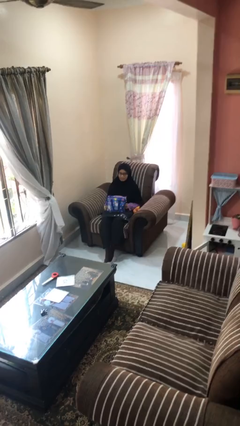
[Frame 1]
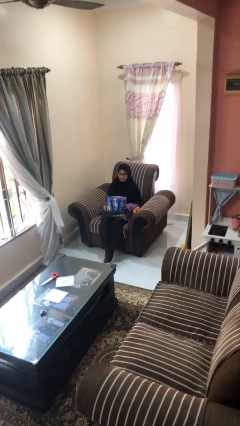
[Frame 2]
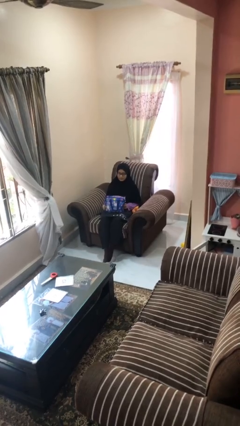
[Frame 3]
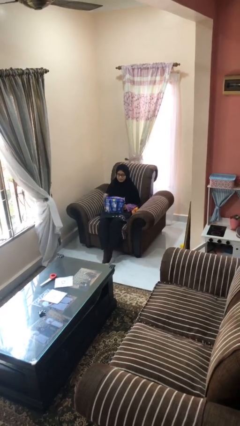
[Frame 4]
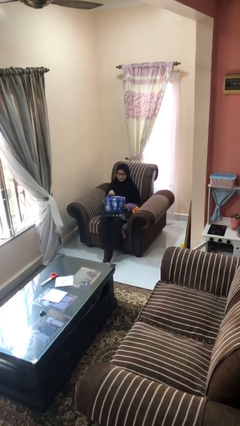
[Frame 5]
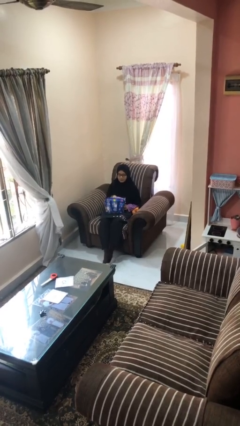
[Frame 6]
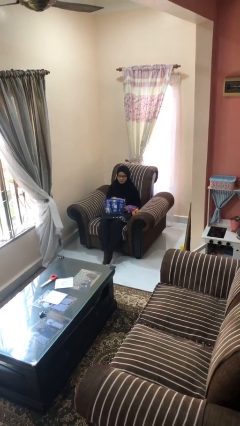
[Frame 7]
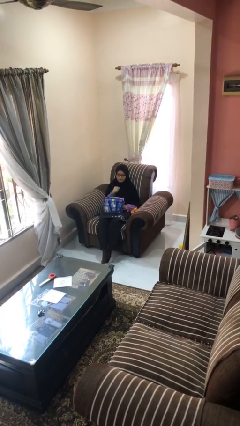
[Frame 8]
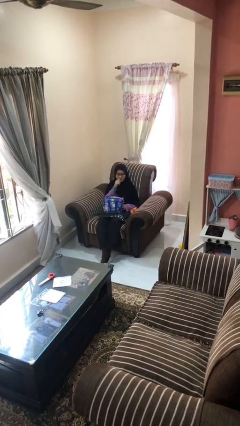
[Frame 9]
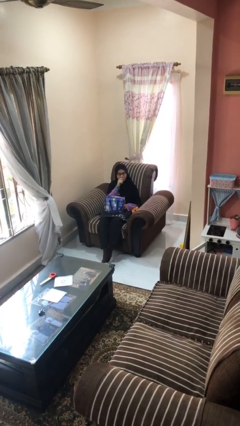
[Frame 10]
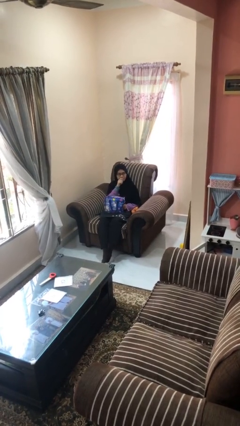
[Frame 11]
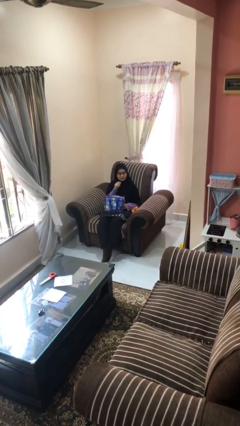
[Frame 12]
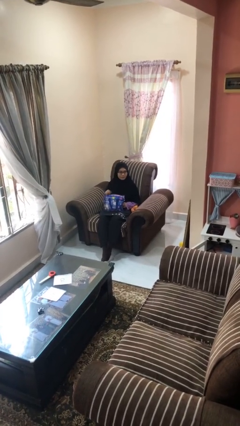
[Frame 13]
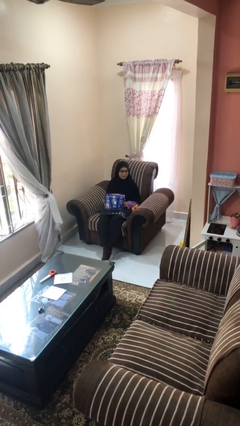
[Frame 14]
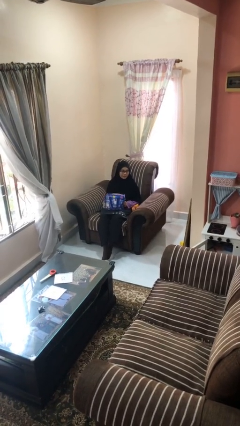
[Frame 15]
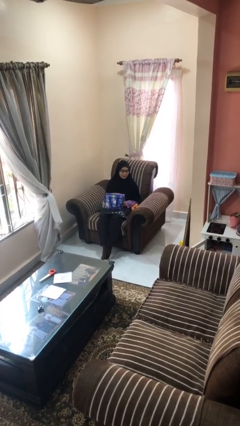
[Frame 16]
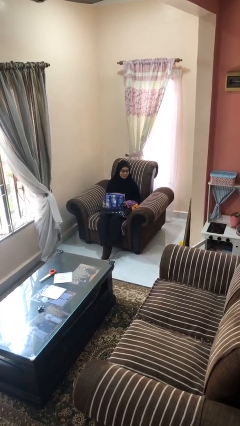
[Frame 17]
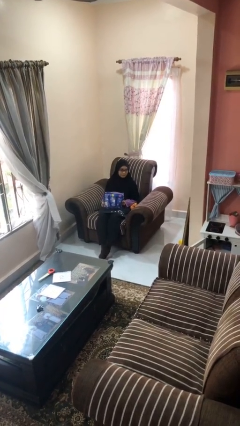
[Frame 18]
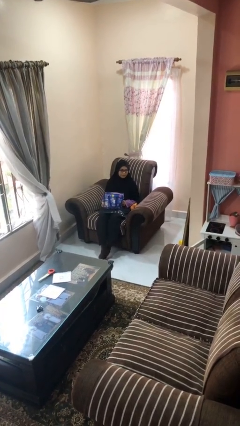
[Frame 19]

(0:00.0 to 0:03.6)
person eats snack from bag

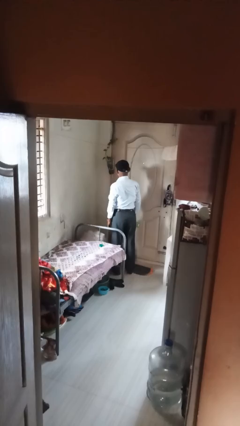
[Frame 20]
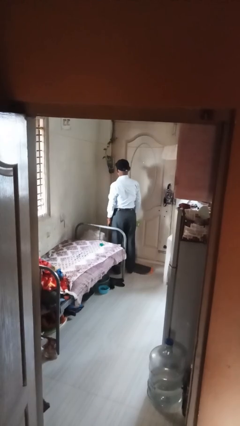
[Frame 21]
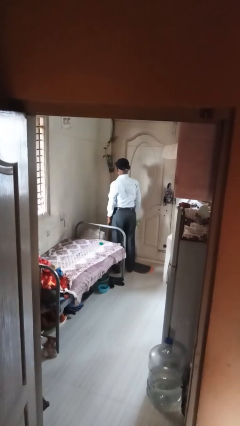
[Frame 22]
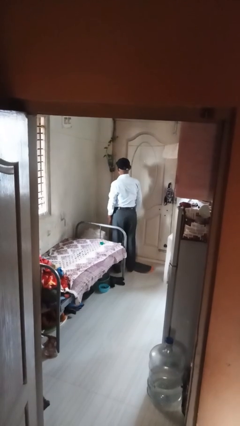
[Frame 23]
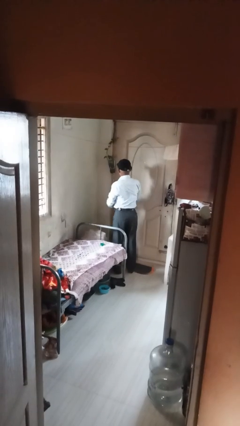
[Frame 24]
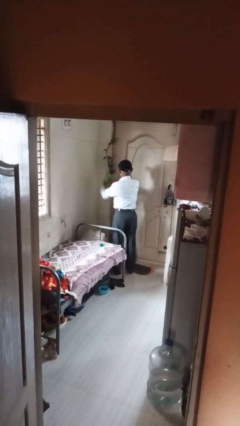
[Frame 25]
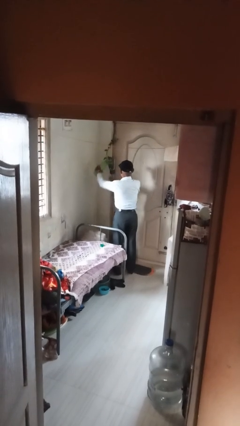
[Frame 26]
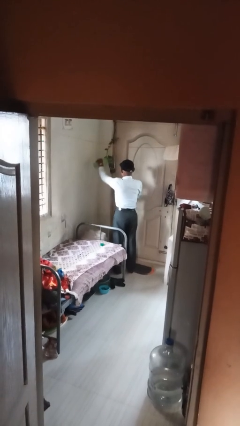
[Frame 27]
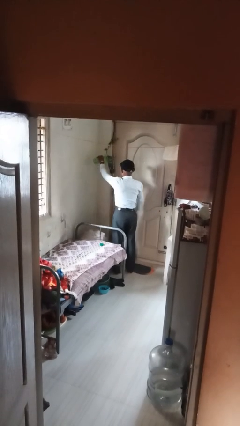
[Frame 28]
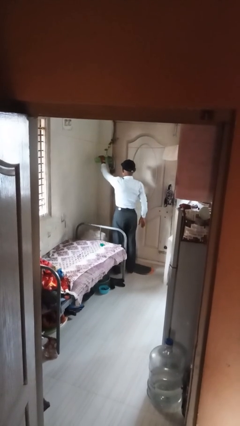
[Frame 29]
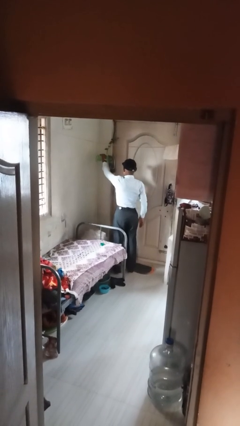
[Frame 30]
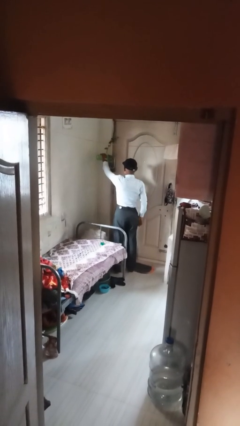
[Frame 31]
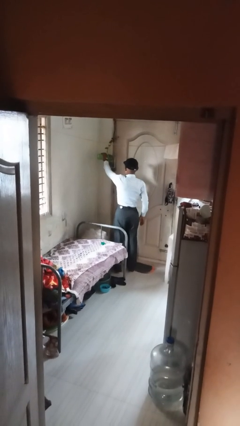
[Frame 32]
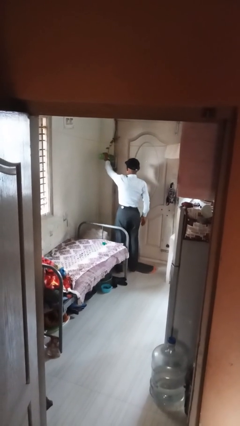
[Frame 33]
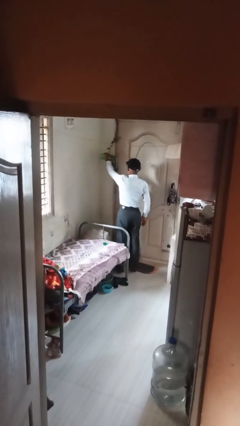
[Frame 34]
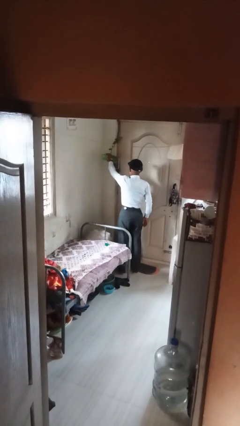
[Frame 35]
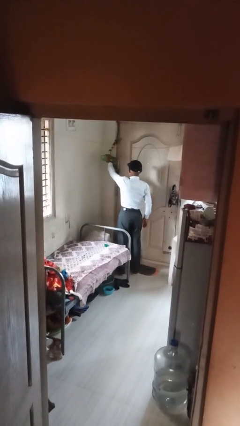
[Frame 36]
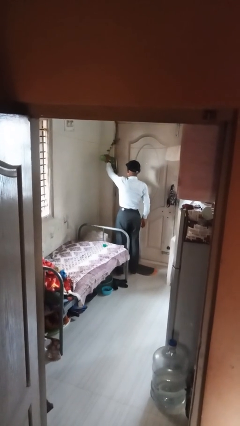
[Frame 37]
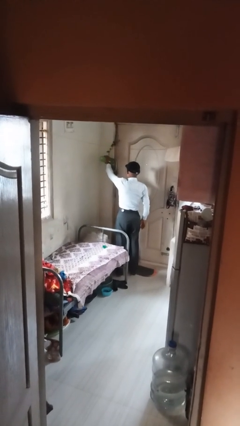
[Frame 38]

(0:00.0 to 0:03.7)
person waters houseplant

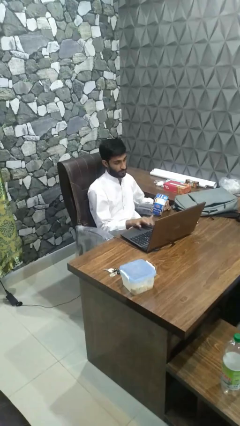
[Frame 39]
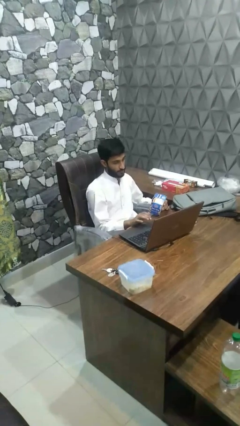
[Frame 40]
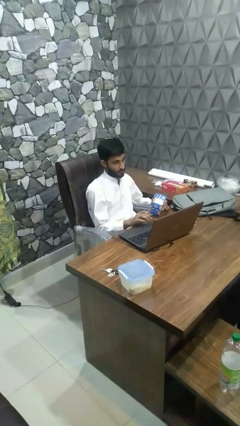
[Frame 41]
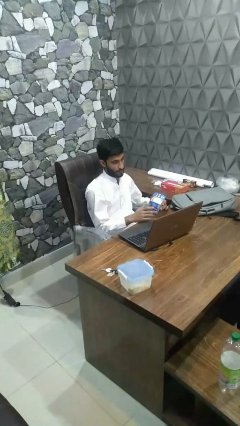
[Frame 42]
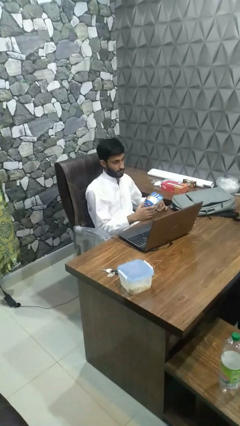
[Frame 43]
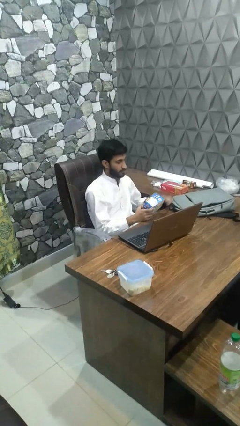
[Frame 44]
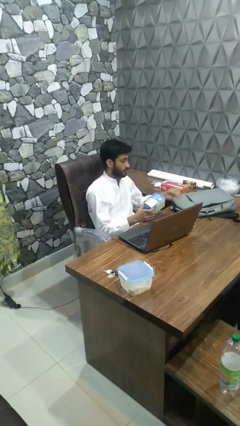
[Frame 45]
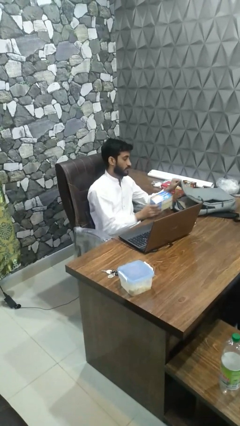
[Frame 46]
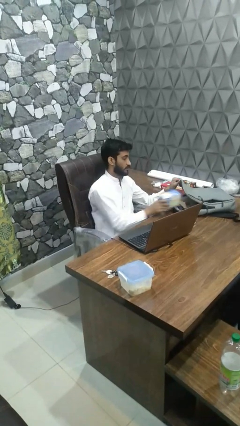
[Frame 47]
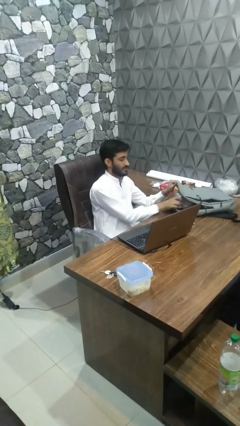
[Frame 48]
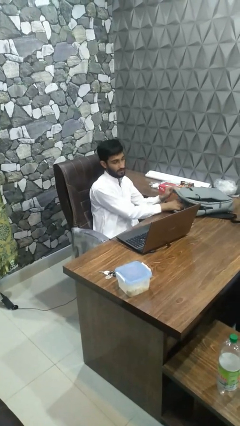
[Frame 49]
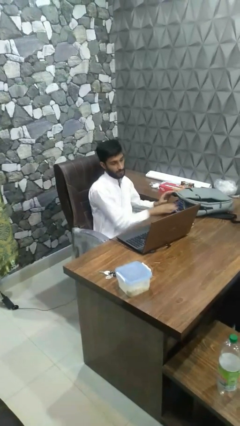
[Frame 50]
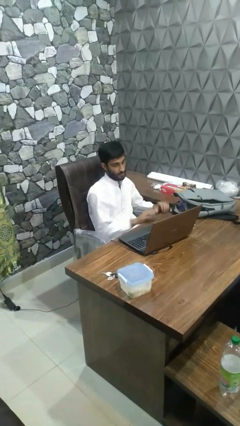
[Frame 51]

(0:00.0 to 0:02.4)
person puts object into bag

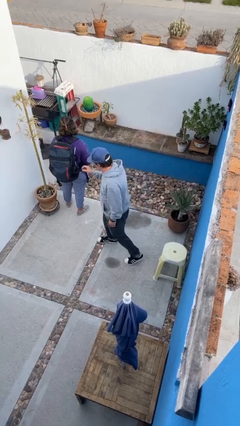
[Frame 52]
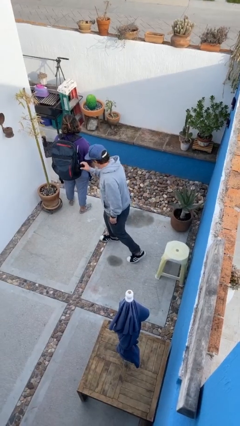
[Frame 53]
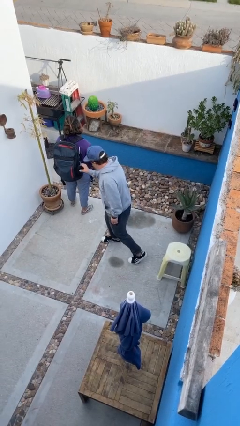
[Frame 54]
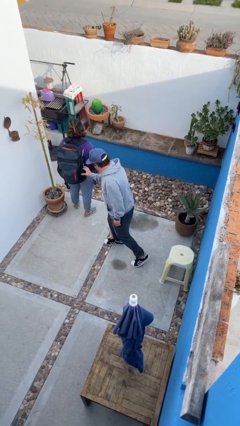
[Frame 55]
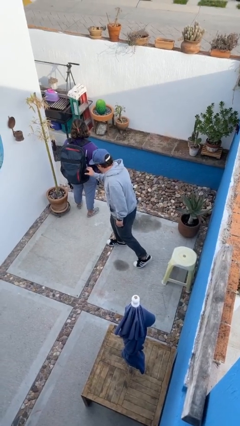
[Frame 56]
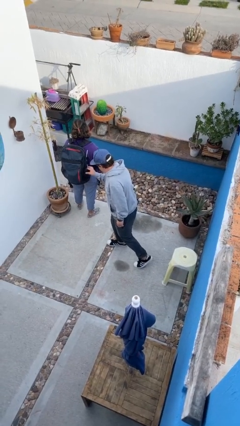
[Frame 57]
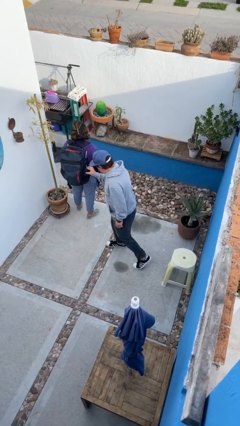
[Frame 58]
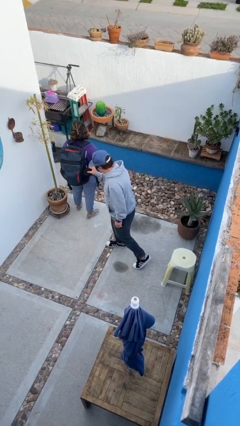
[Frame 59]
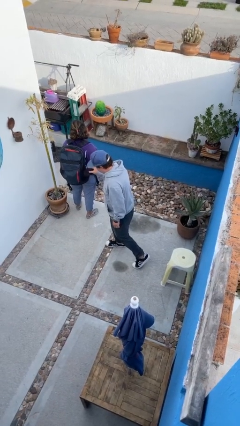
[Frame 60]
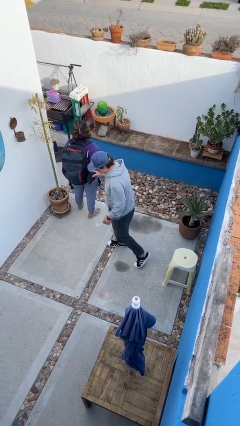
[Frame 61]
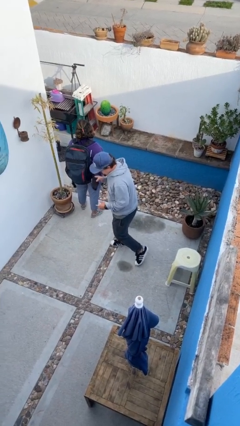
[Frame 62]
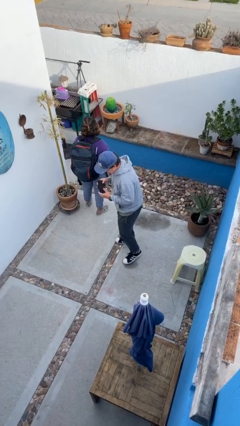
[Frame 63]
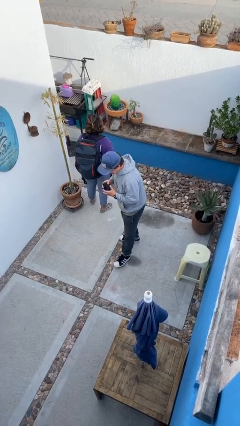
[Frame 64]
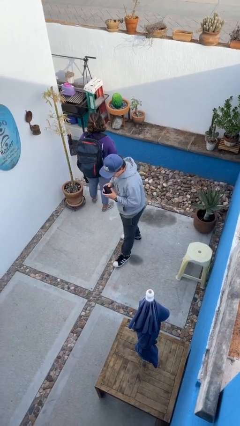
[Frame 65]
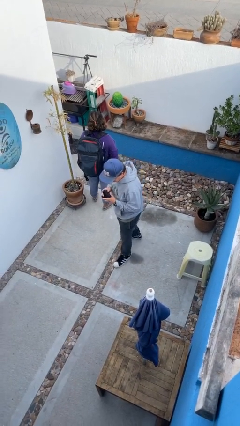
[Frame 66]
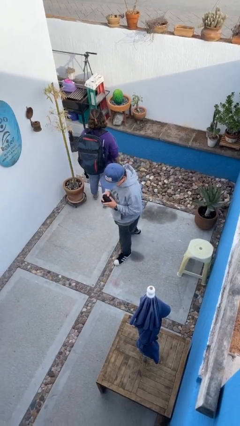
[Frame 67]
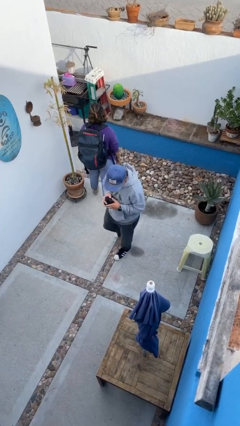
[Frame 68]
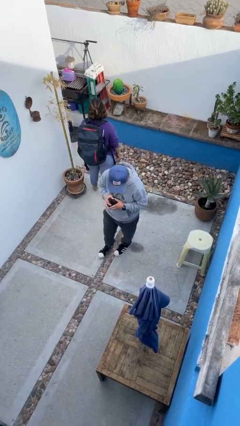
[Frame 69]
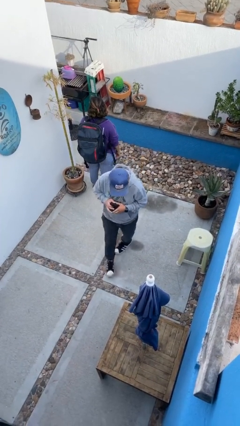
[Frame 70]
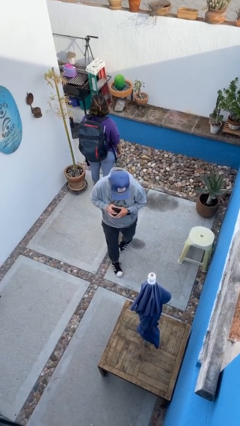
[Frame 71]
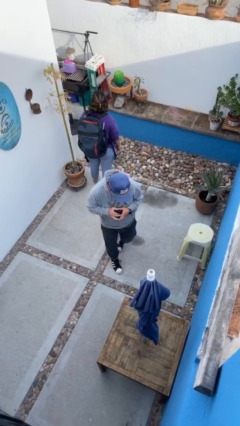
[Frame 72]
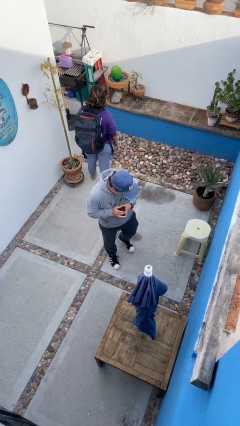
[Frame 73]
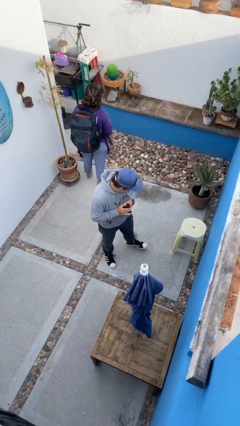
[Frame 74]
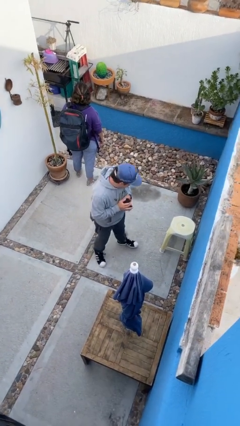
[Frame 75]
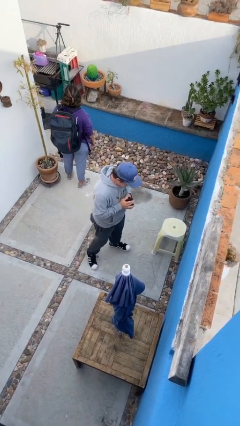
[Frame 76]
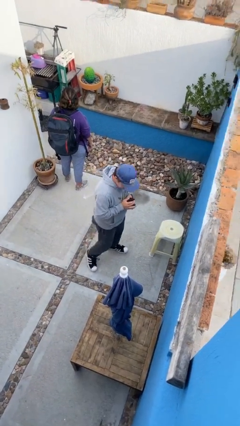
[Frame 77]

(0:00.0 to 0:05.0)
person steals object from person

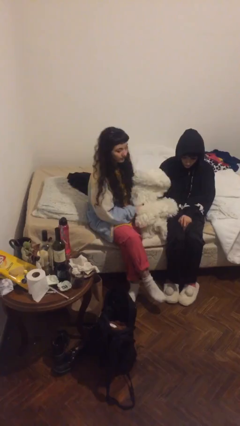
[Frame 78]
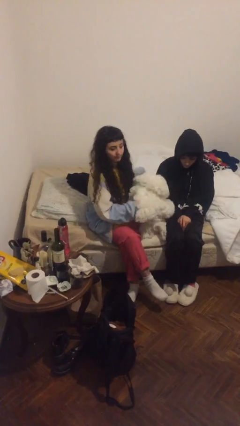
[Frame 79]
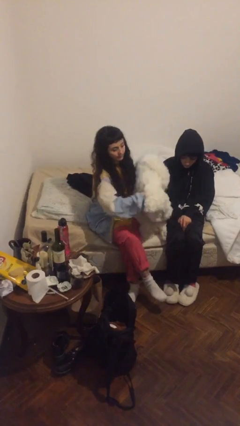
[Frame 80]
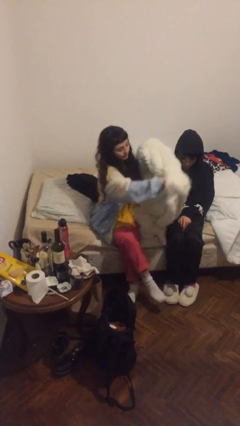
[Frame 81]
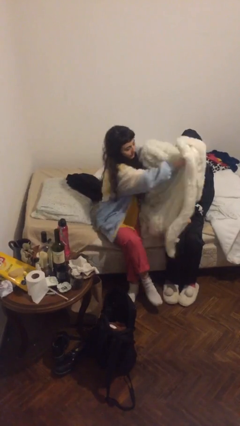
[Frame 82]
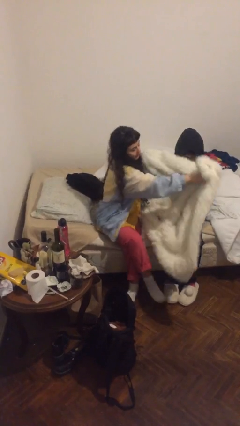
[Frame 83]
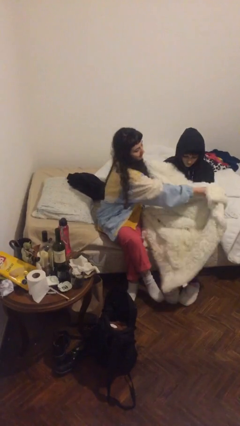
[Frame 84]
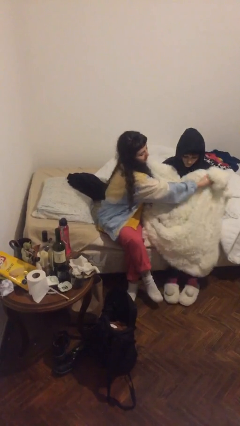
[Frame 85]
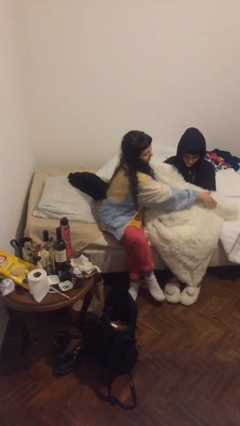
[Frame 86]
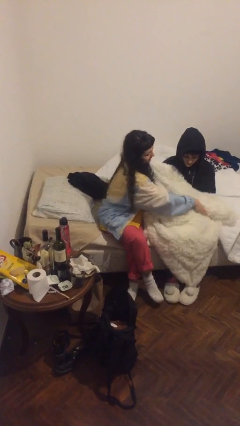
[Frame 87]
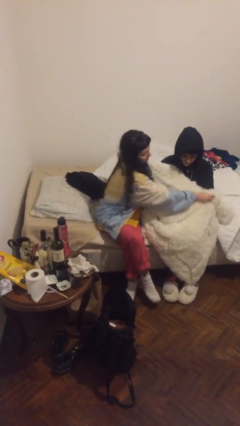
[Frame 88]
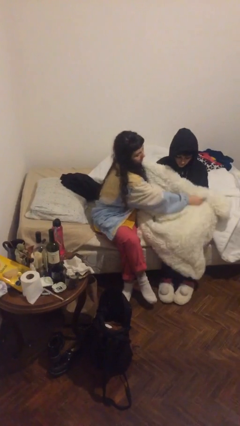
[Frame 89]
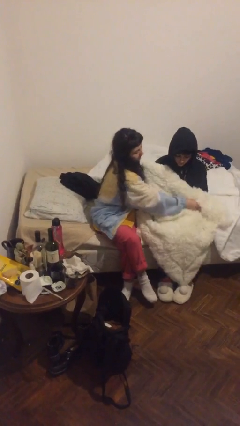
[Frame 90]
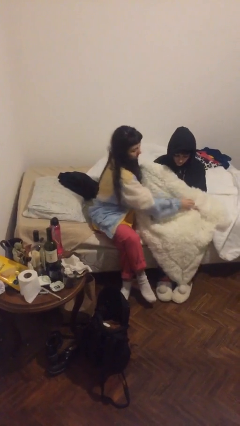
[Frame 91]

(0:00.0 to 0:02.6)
person covers friend with blanket
